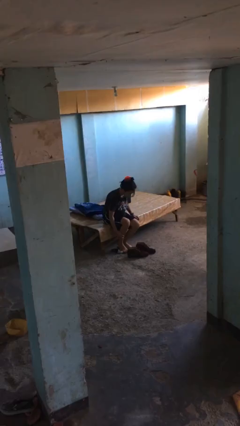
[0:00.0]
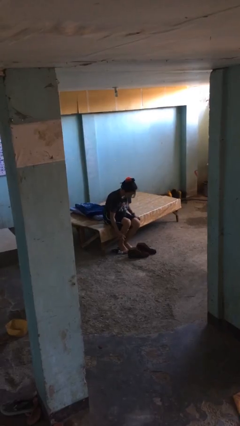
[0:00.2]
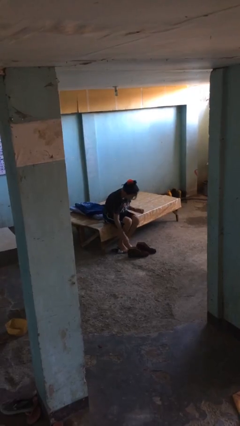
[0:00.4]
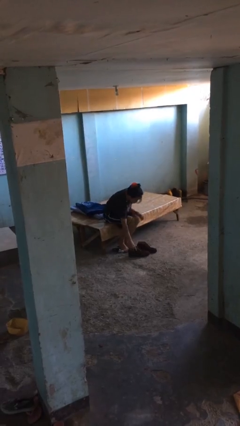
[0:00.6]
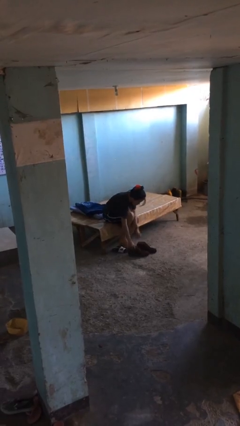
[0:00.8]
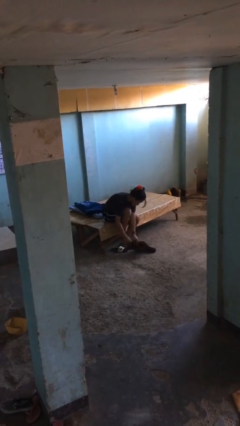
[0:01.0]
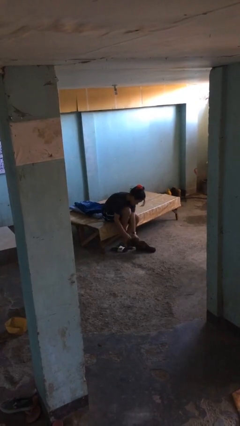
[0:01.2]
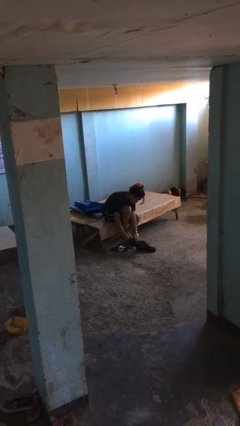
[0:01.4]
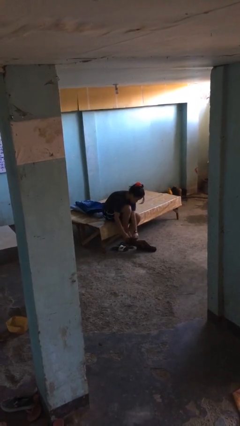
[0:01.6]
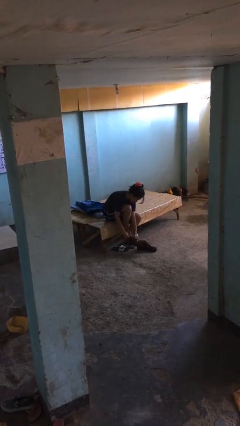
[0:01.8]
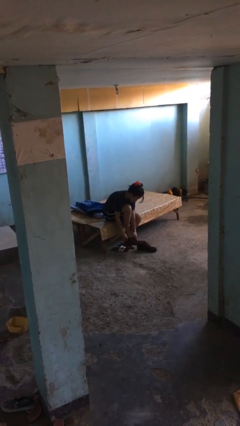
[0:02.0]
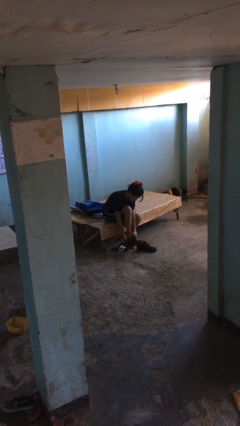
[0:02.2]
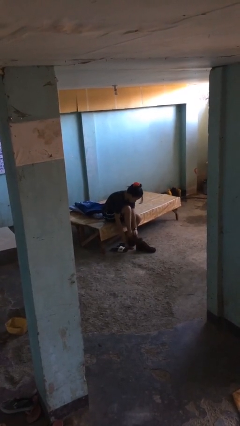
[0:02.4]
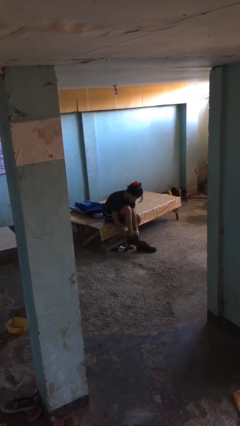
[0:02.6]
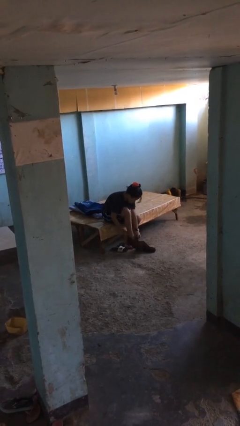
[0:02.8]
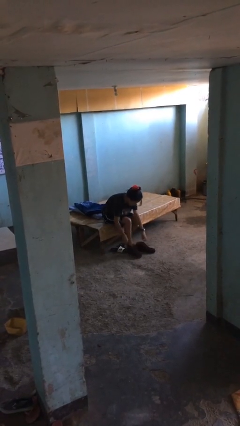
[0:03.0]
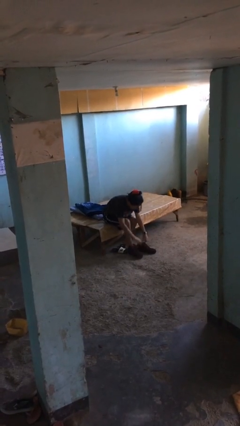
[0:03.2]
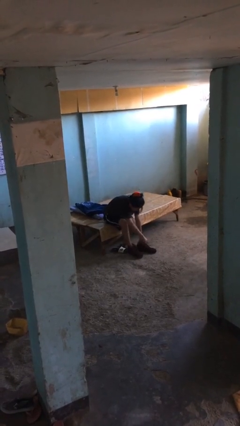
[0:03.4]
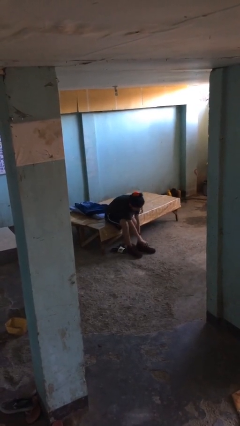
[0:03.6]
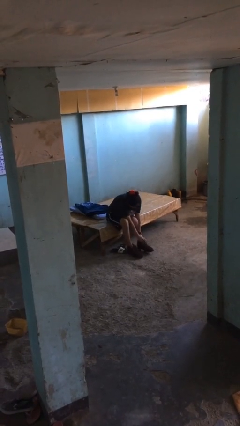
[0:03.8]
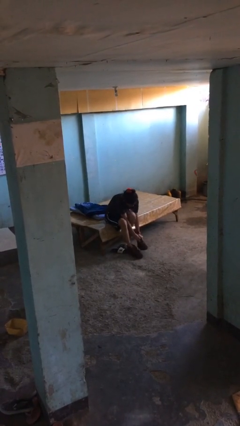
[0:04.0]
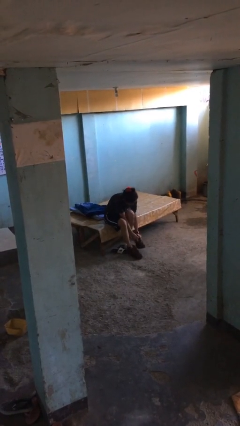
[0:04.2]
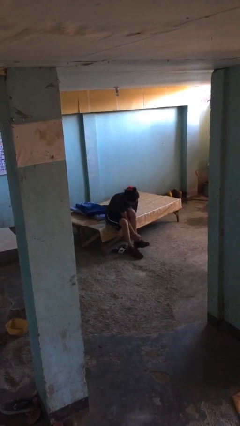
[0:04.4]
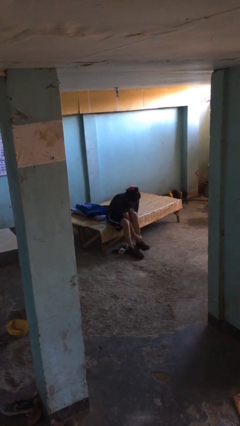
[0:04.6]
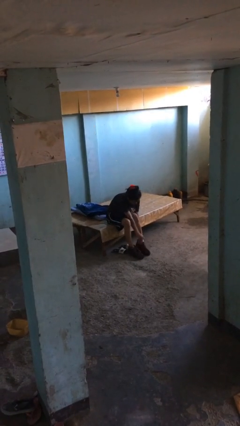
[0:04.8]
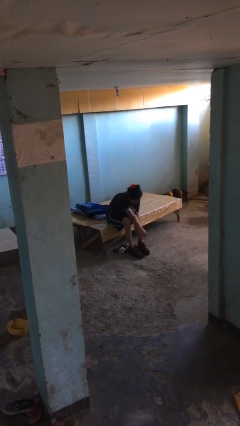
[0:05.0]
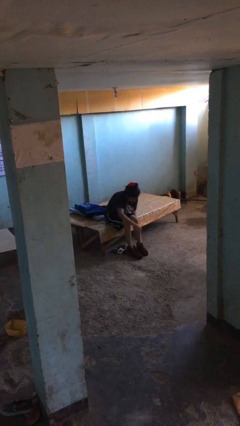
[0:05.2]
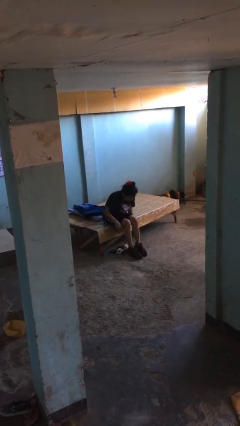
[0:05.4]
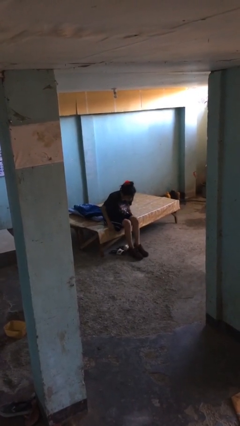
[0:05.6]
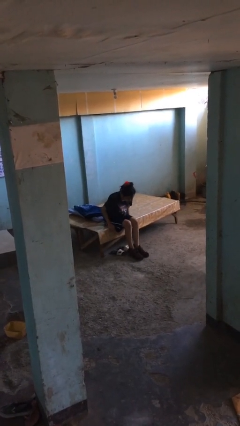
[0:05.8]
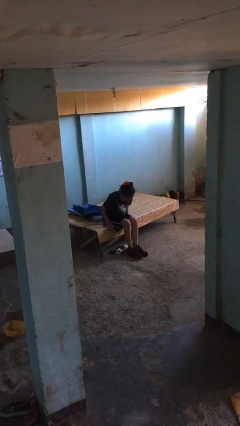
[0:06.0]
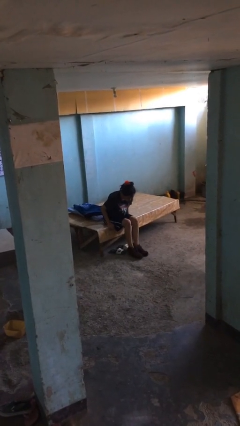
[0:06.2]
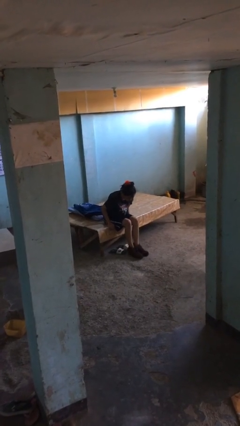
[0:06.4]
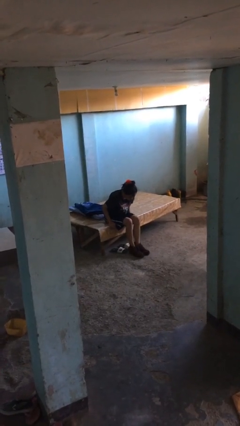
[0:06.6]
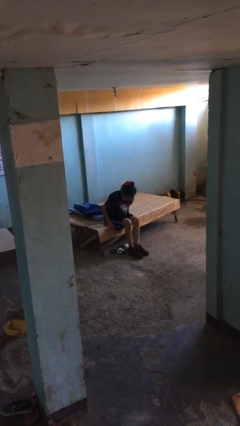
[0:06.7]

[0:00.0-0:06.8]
person puts on boots

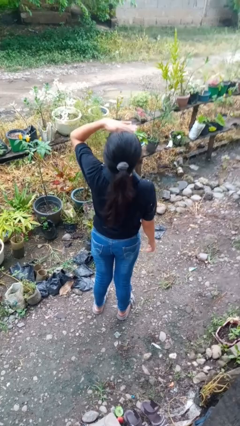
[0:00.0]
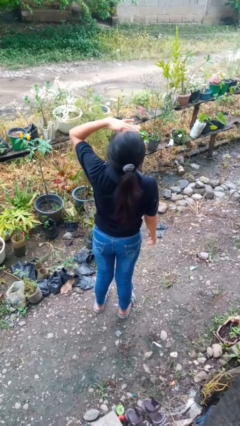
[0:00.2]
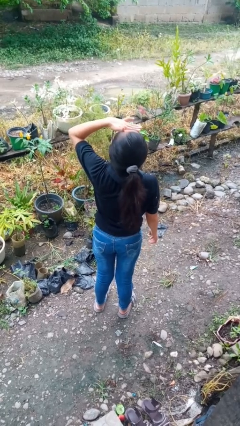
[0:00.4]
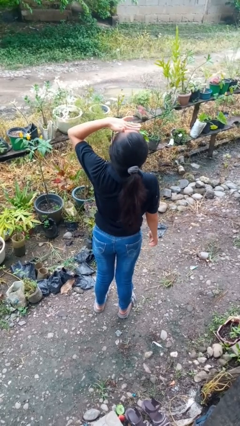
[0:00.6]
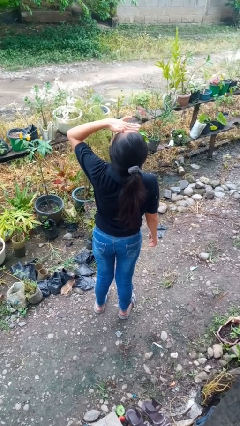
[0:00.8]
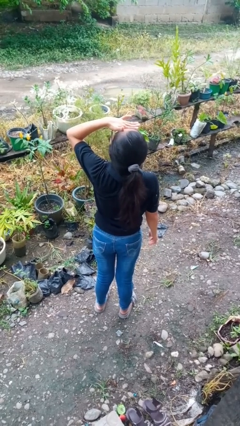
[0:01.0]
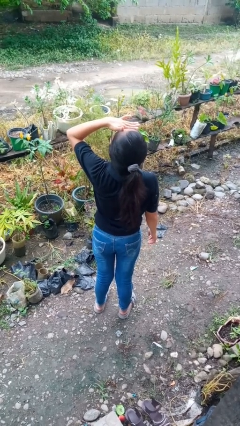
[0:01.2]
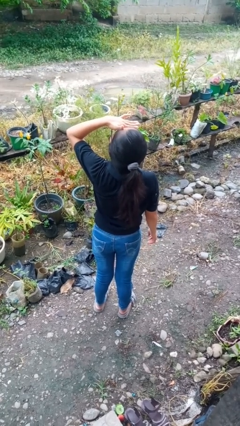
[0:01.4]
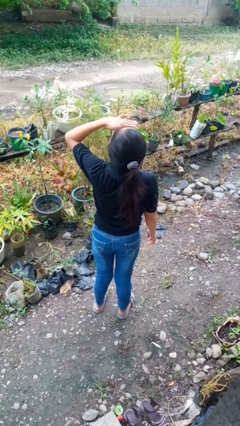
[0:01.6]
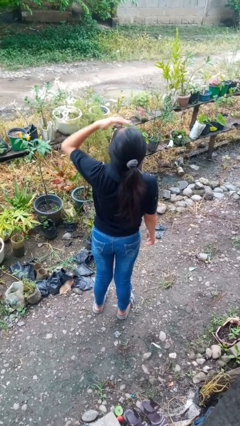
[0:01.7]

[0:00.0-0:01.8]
person shades eyes

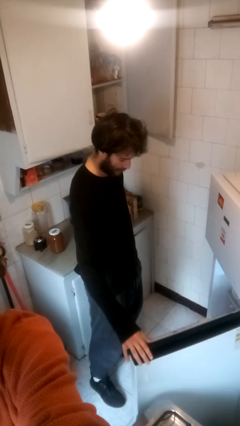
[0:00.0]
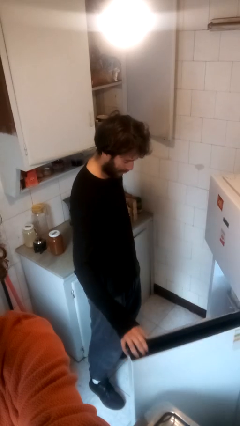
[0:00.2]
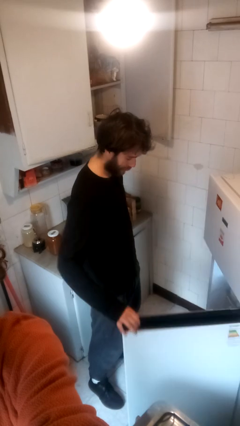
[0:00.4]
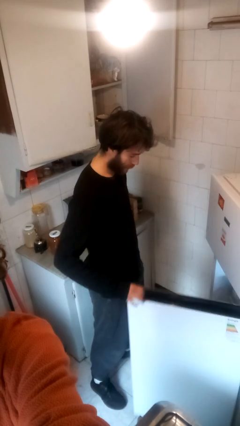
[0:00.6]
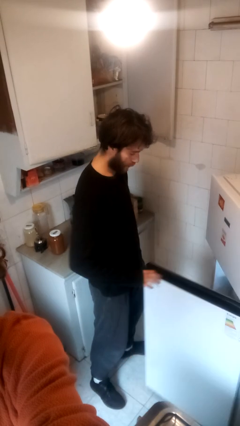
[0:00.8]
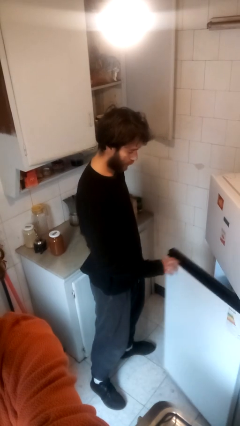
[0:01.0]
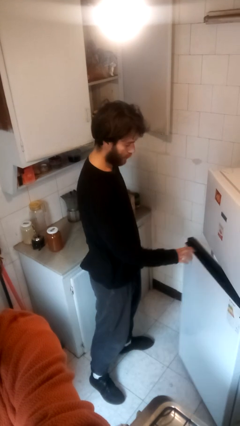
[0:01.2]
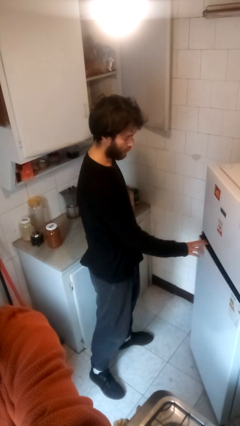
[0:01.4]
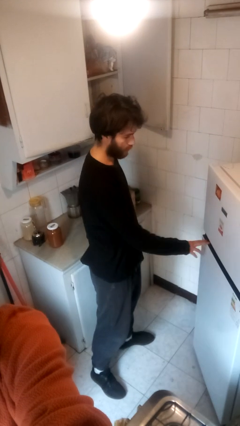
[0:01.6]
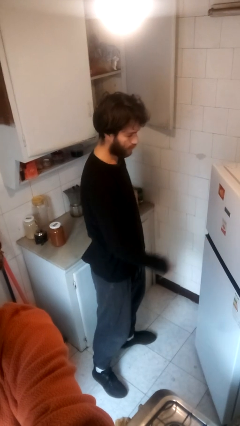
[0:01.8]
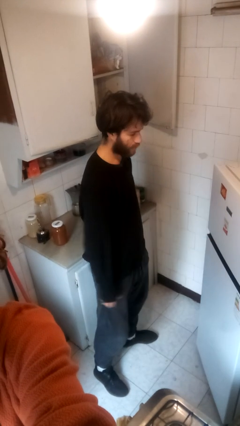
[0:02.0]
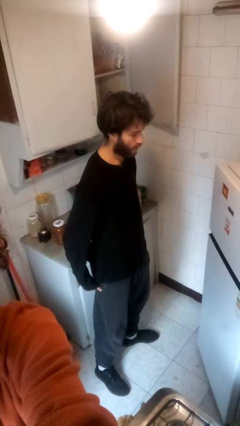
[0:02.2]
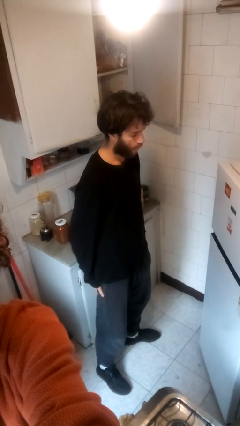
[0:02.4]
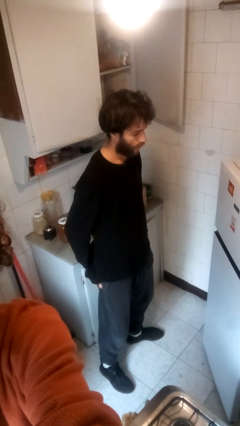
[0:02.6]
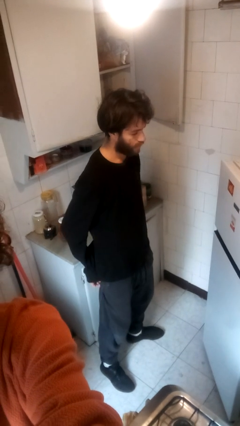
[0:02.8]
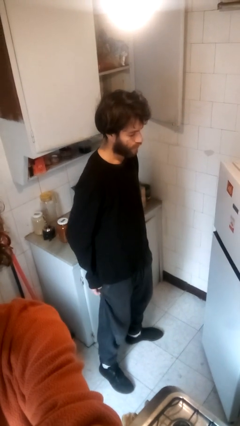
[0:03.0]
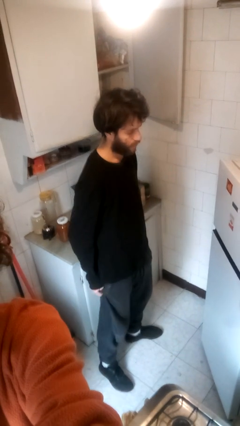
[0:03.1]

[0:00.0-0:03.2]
person closes refrigerator

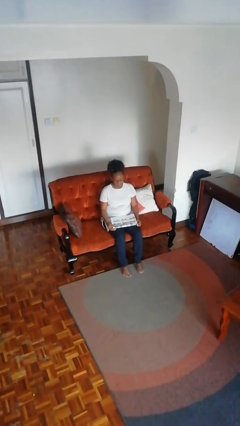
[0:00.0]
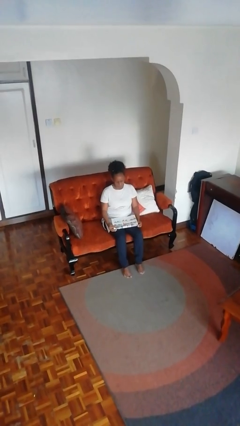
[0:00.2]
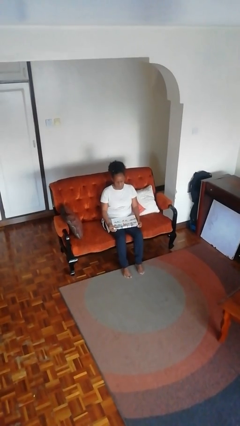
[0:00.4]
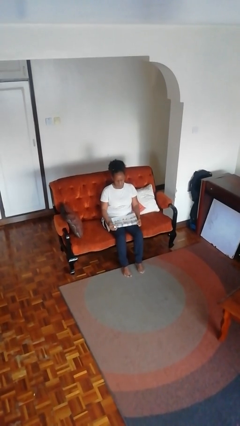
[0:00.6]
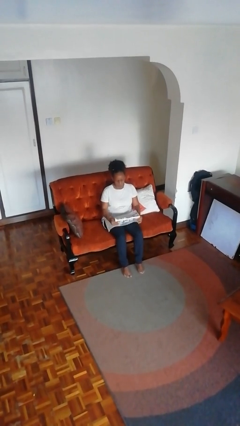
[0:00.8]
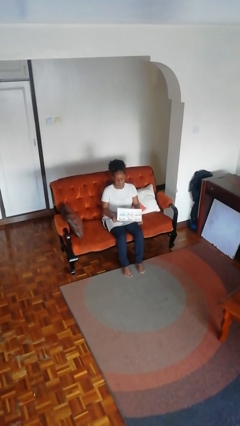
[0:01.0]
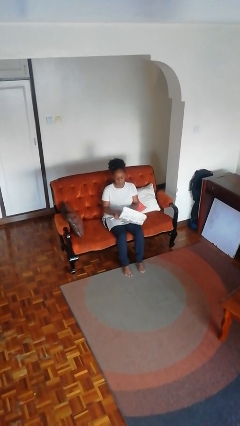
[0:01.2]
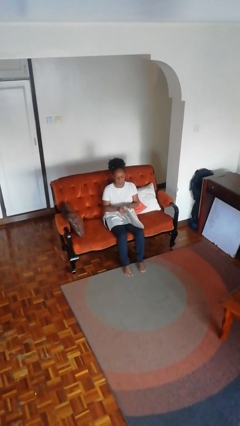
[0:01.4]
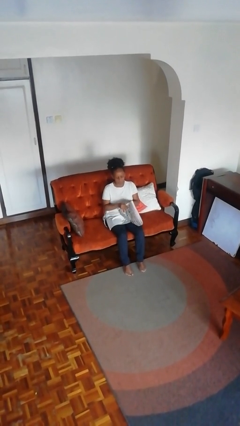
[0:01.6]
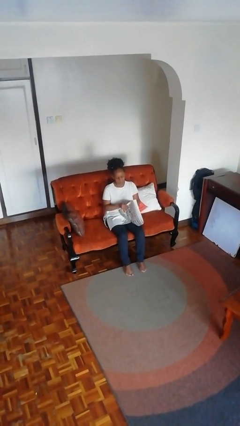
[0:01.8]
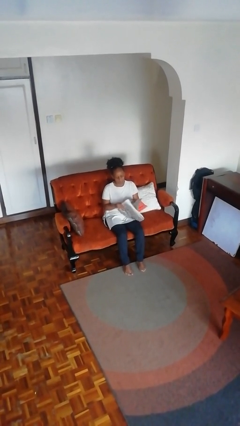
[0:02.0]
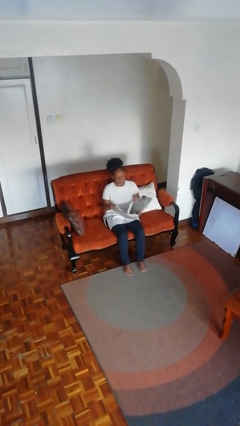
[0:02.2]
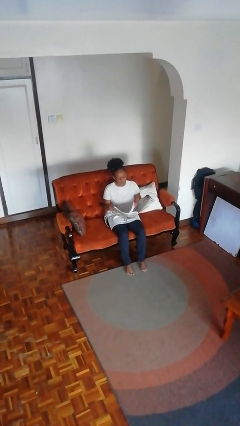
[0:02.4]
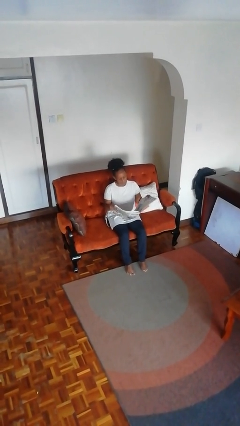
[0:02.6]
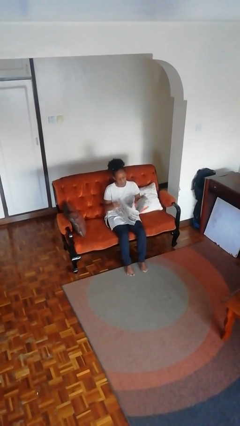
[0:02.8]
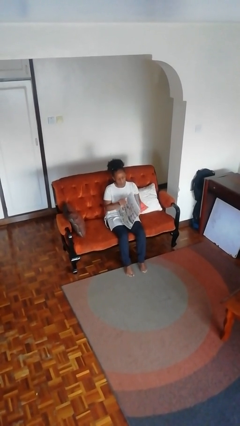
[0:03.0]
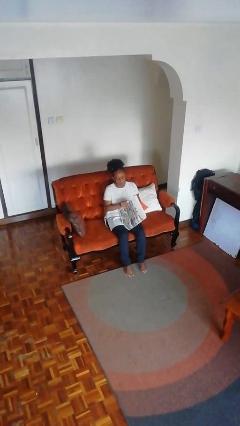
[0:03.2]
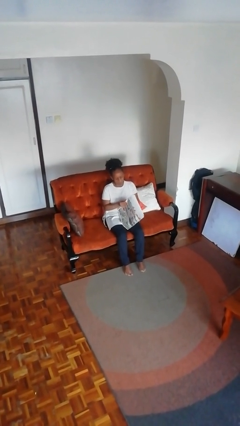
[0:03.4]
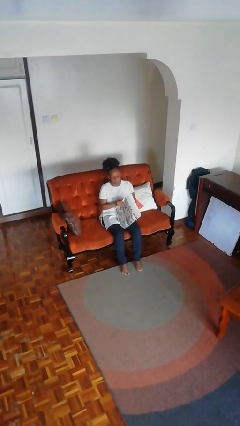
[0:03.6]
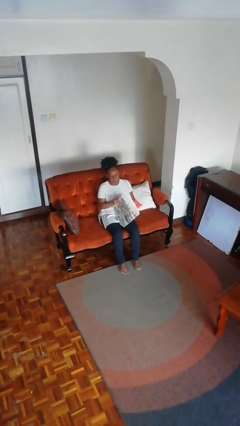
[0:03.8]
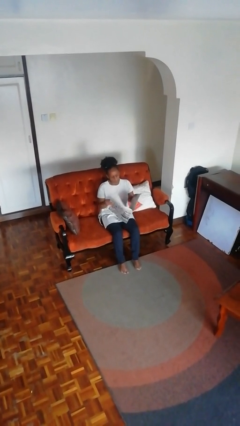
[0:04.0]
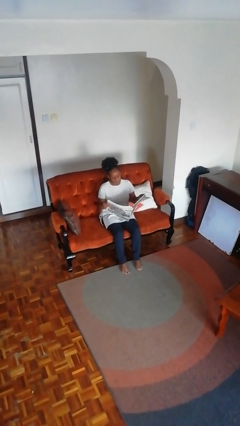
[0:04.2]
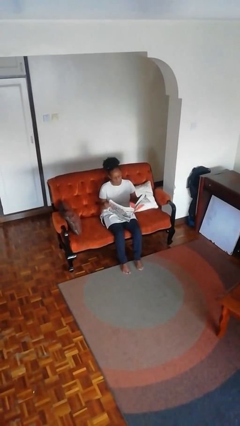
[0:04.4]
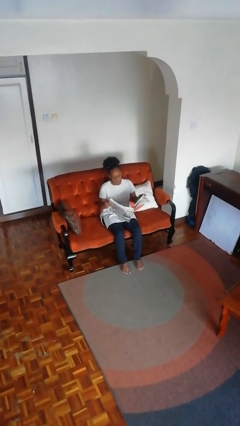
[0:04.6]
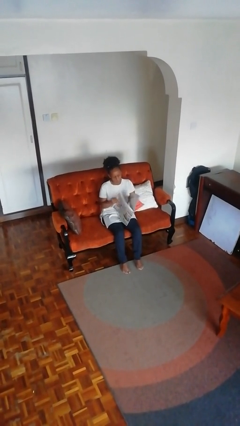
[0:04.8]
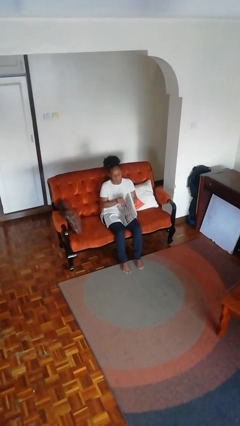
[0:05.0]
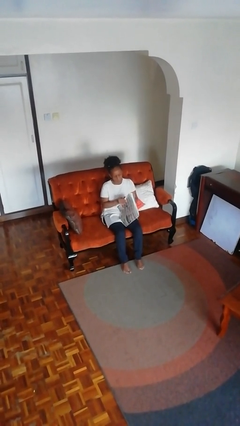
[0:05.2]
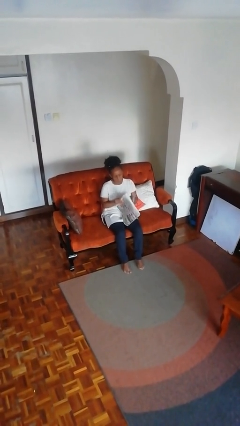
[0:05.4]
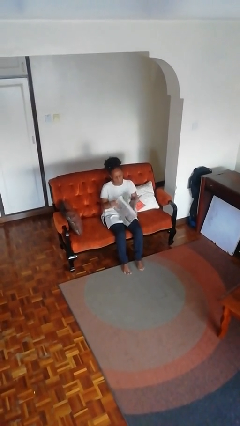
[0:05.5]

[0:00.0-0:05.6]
person reads newspaper

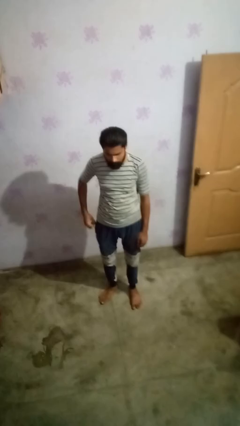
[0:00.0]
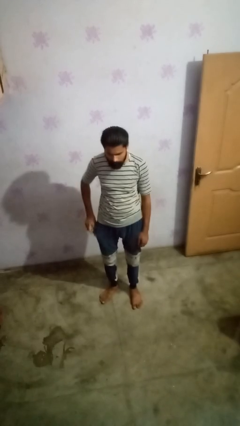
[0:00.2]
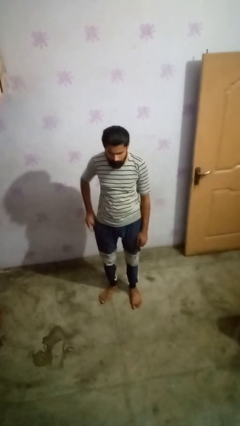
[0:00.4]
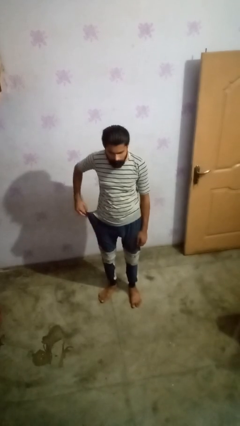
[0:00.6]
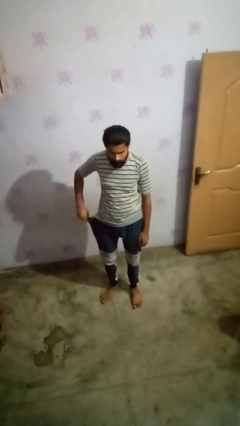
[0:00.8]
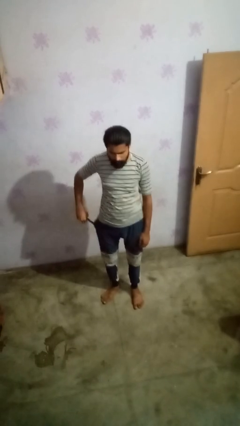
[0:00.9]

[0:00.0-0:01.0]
person takes phone from pocket
